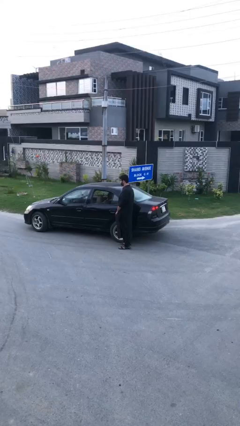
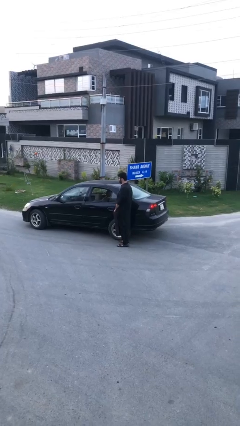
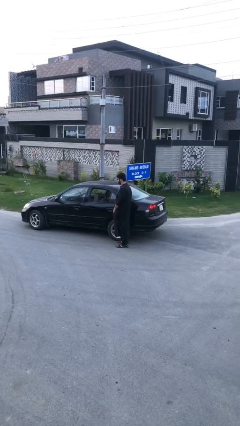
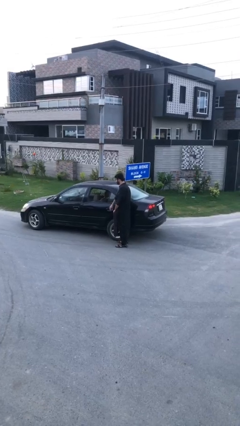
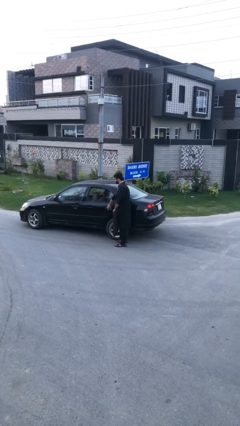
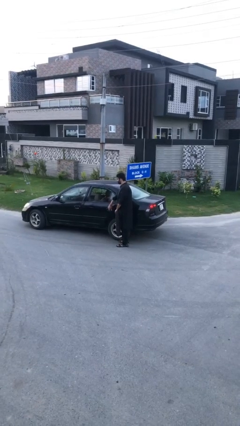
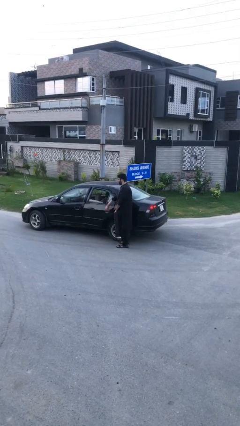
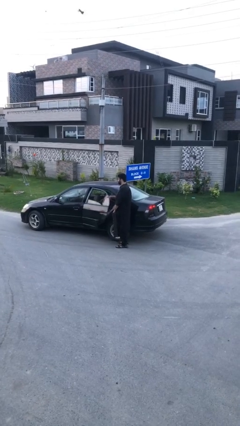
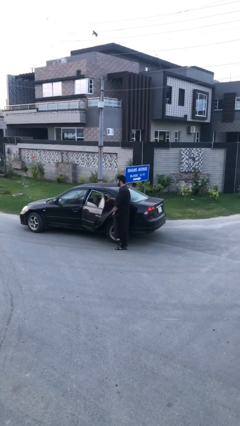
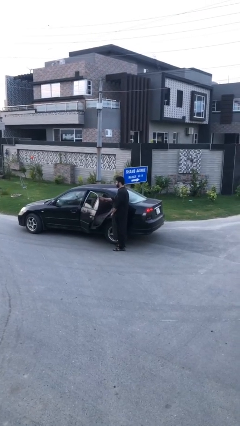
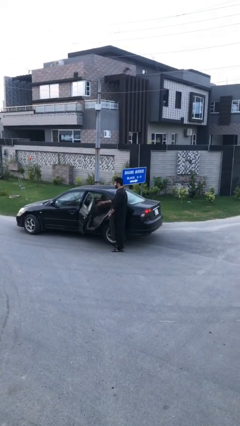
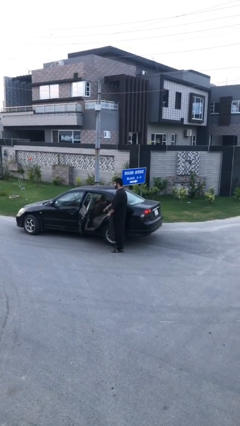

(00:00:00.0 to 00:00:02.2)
person opens car door

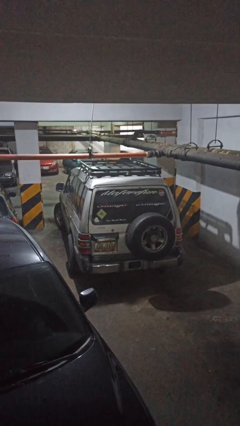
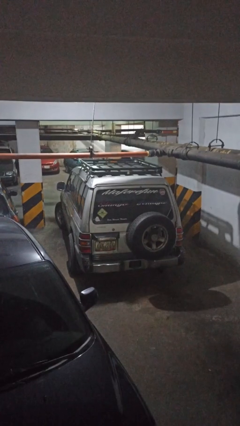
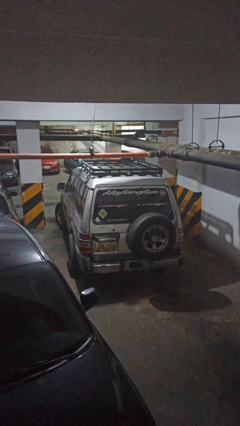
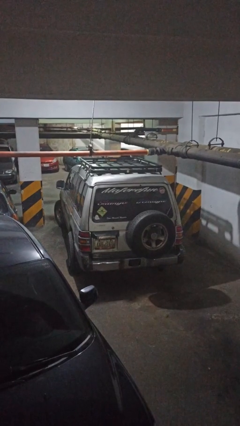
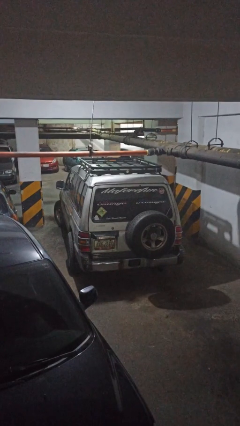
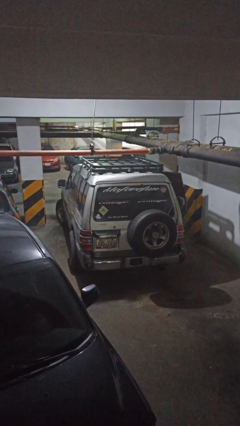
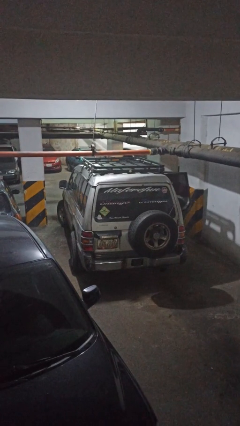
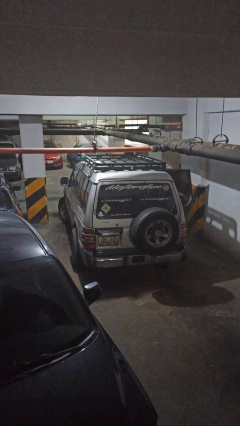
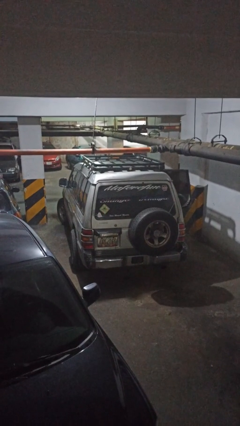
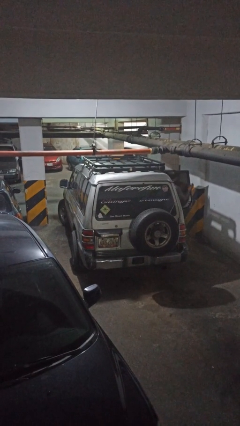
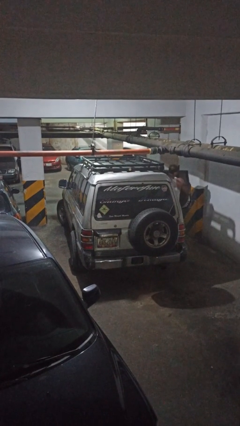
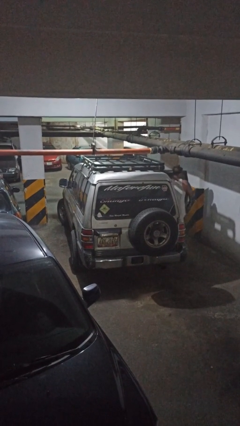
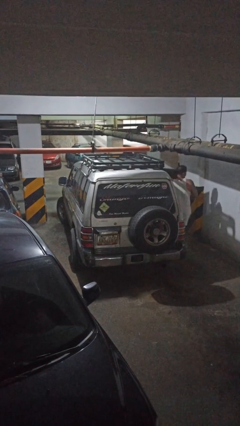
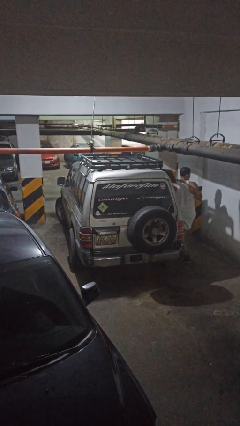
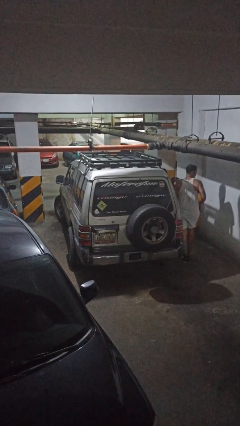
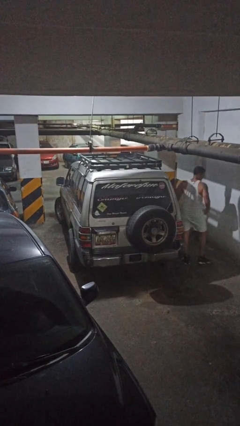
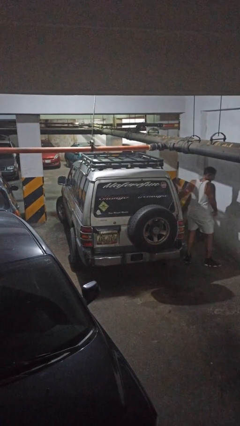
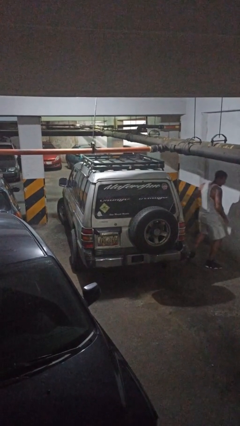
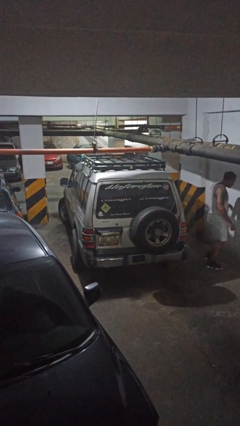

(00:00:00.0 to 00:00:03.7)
car drops off person

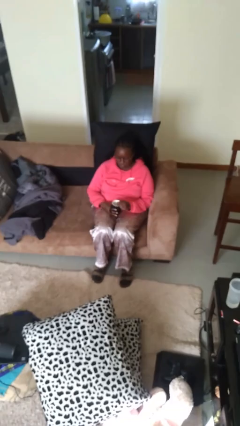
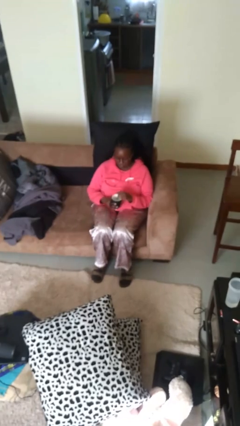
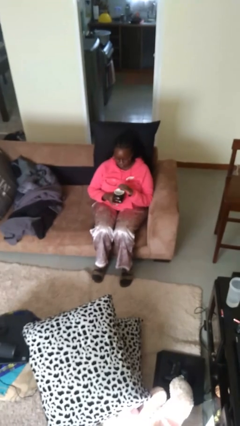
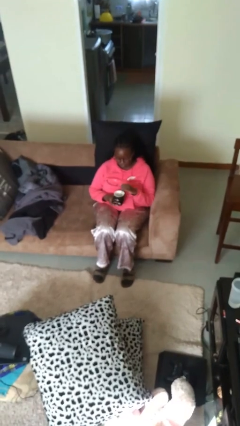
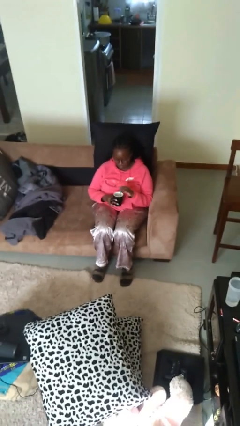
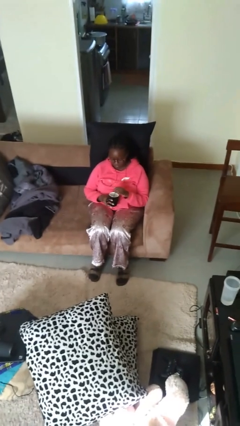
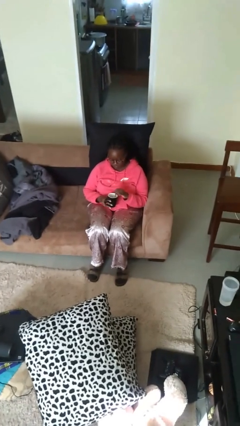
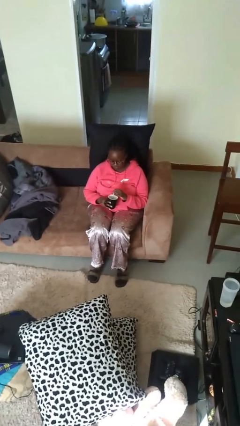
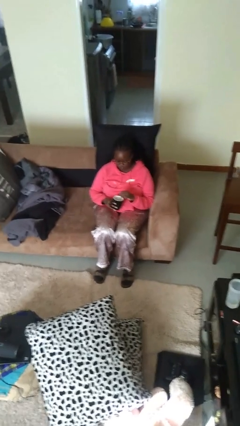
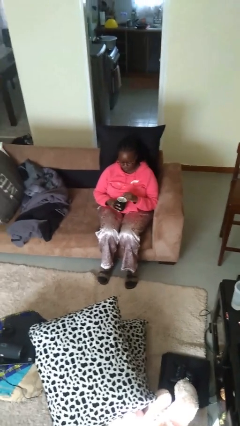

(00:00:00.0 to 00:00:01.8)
person stirs mug

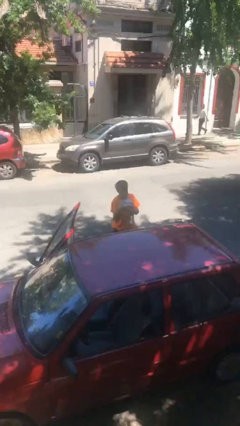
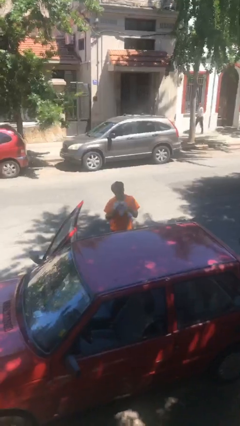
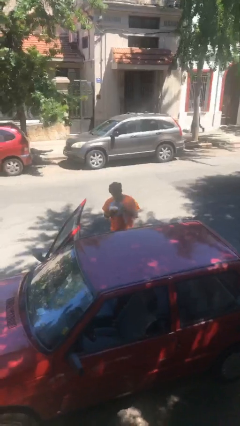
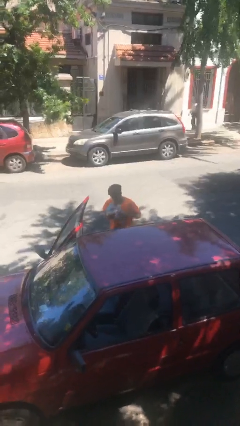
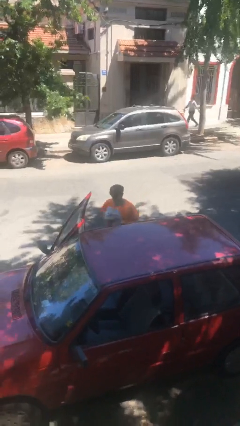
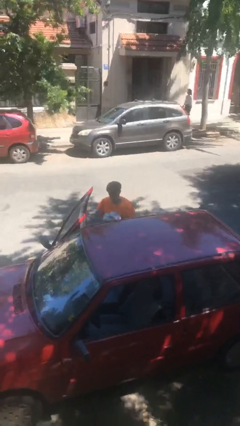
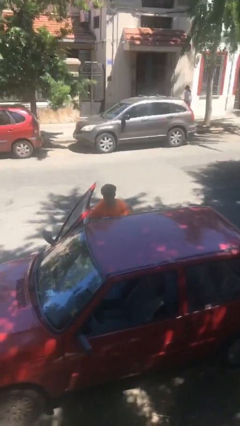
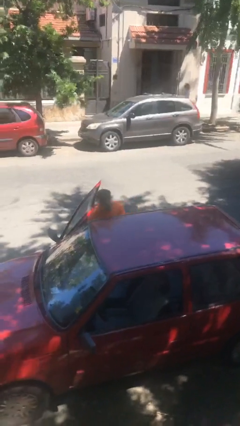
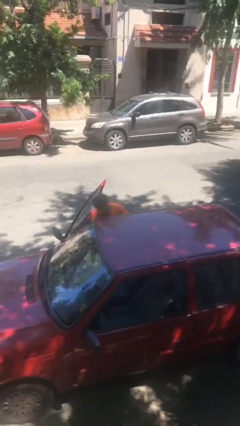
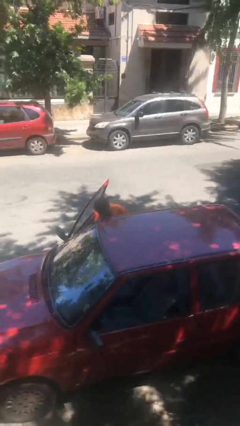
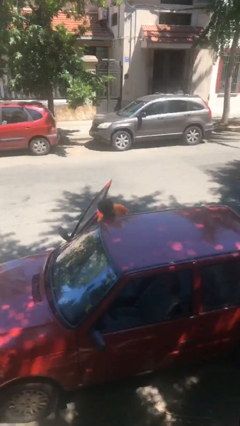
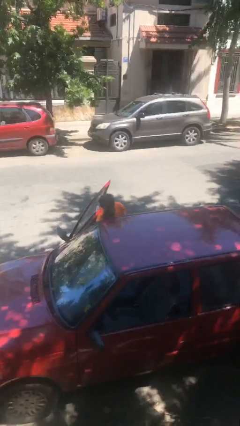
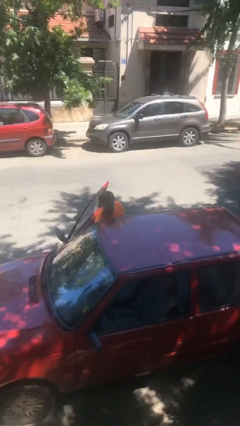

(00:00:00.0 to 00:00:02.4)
person loads car

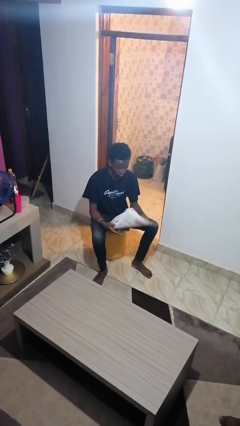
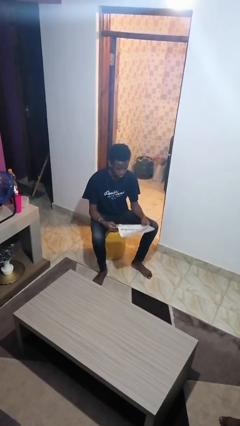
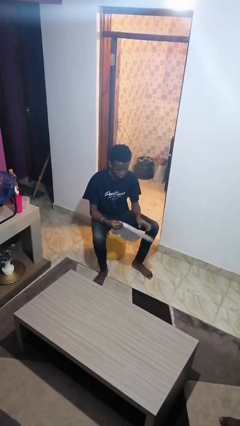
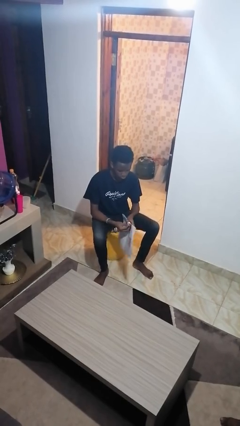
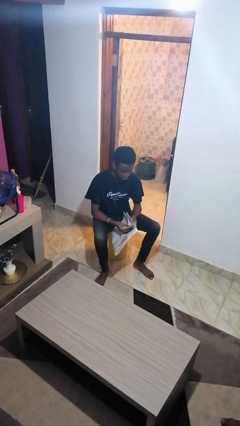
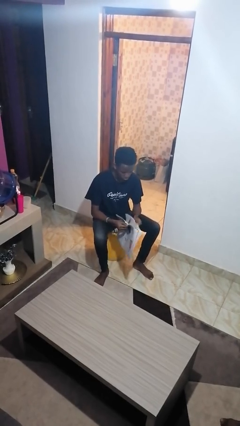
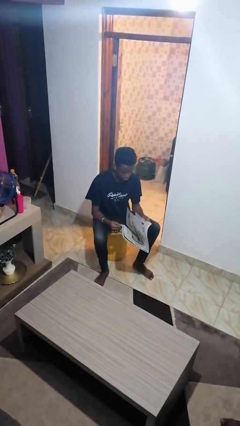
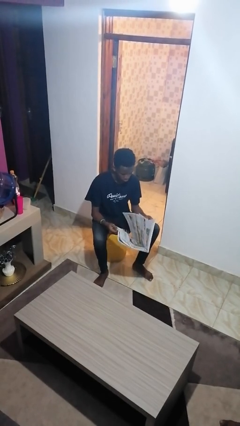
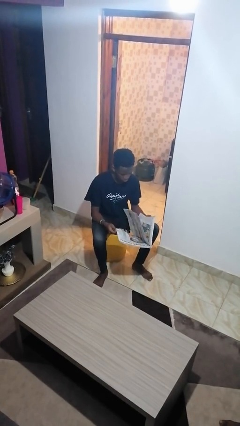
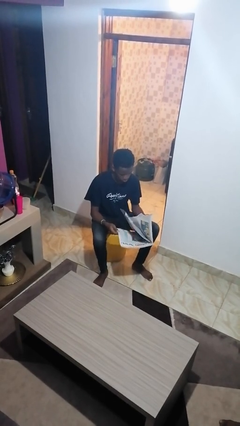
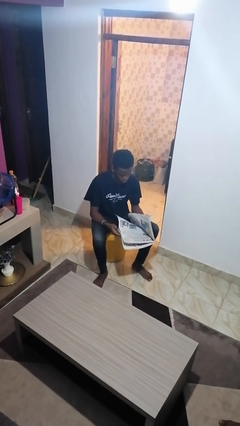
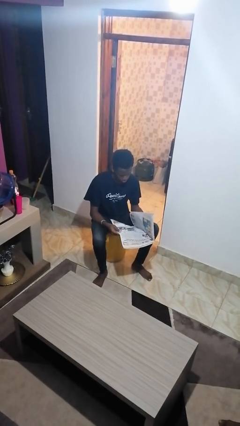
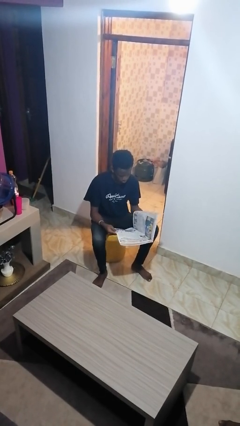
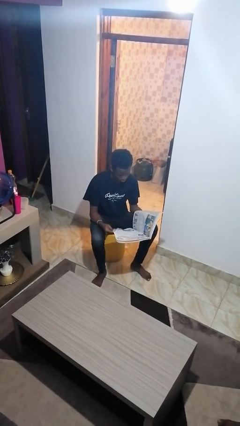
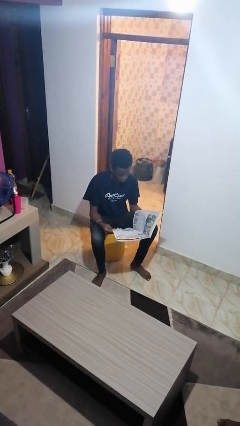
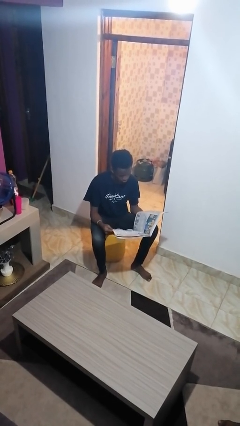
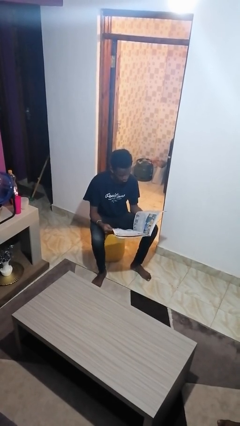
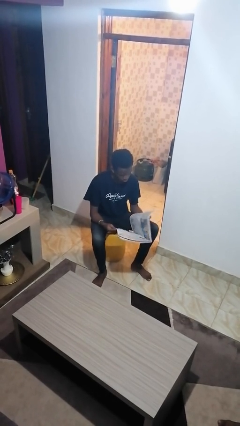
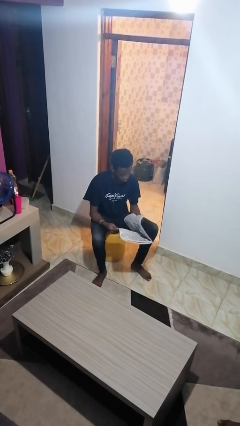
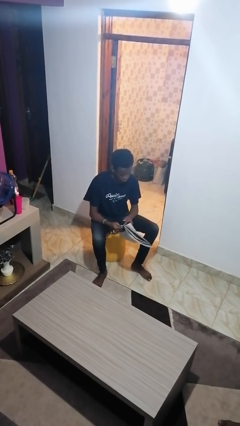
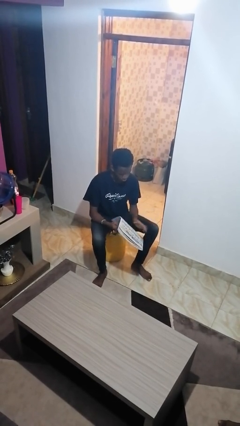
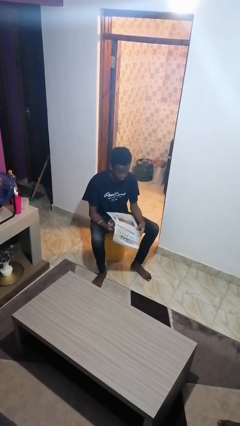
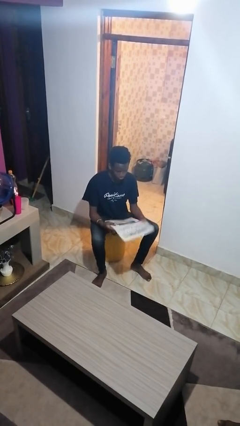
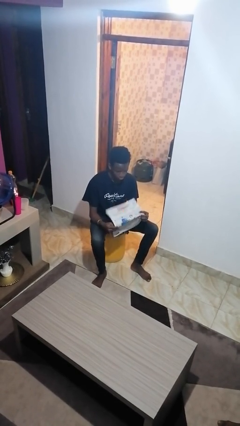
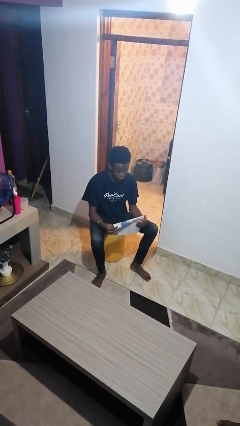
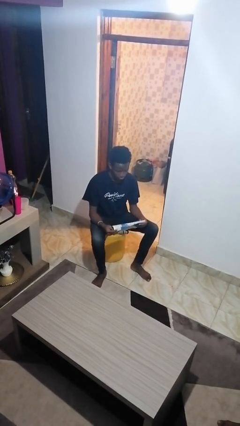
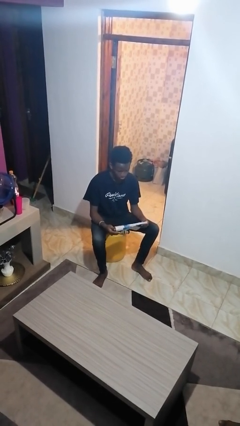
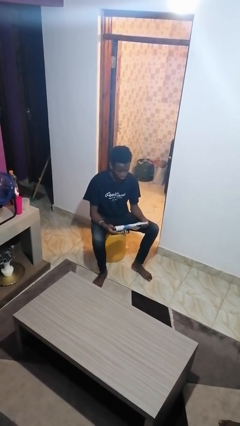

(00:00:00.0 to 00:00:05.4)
person reads newspaper

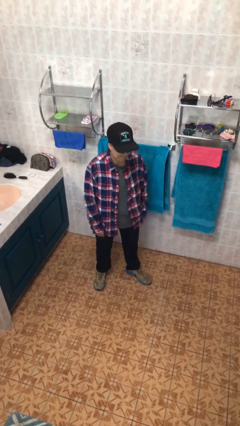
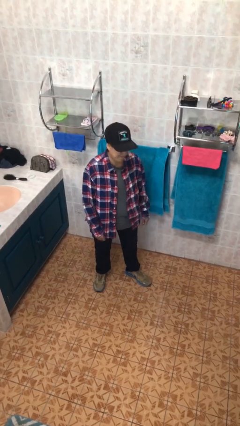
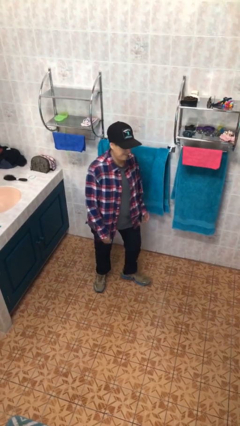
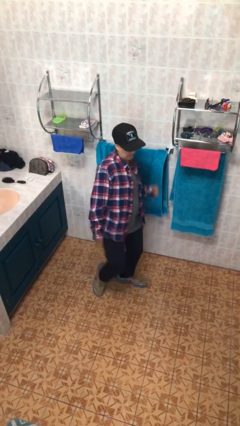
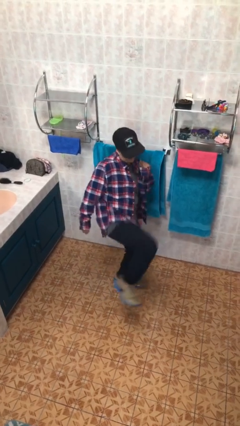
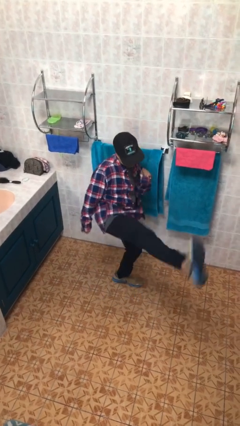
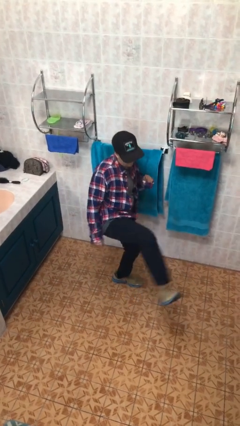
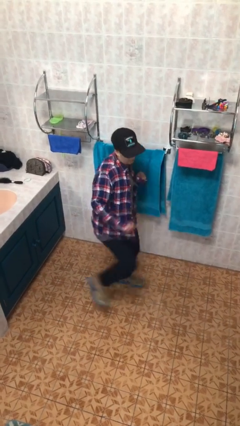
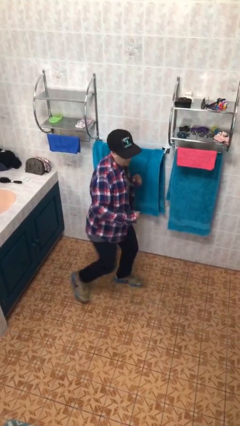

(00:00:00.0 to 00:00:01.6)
person karate kicks

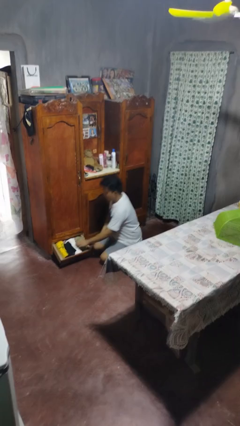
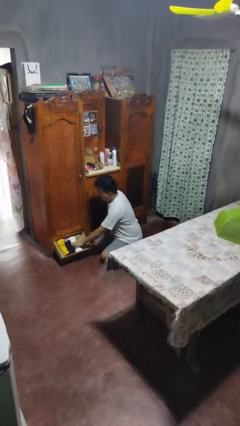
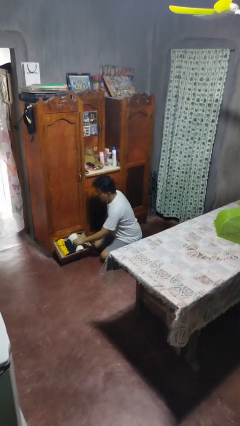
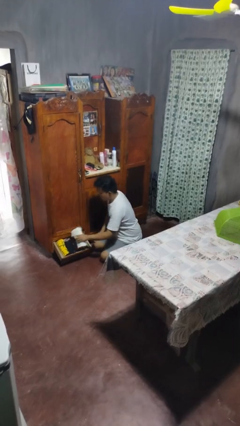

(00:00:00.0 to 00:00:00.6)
person takes clothes from dresser
